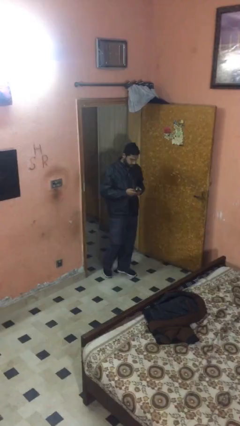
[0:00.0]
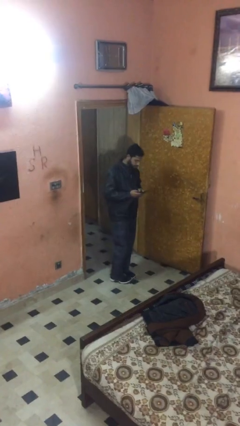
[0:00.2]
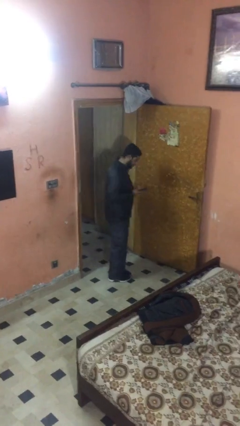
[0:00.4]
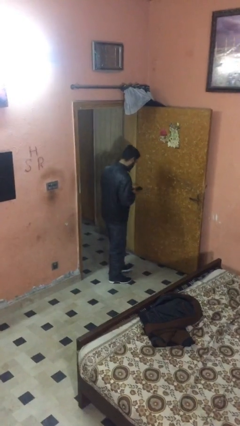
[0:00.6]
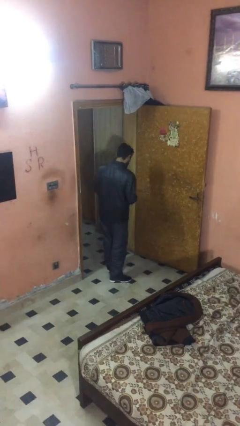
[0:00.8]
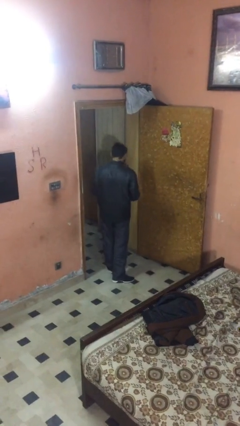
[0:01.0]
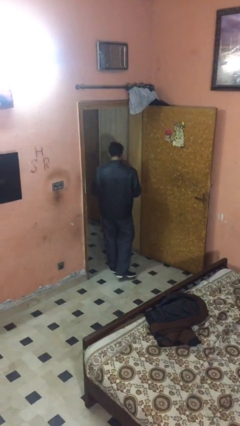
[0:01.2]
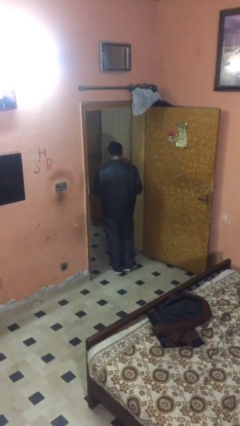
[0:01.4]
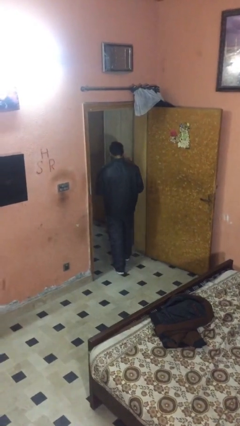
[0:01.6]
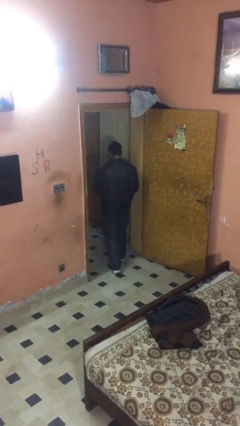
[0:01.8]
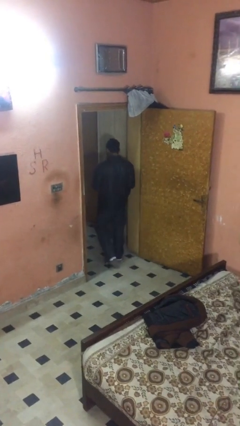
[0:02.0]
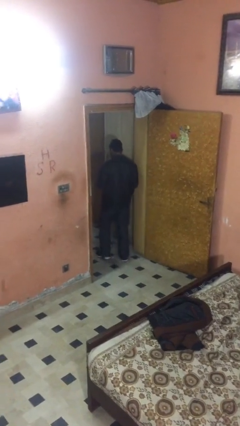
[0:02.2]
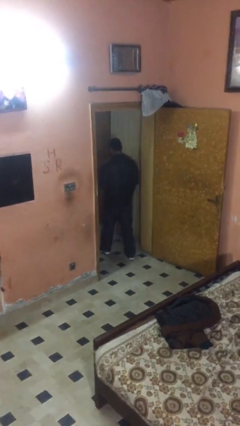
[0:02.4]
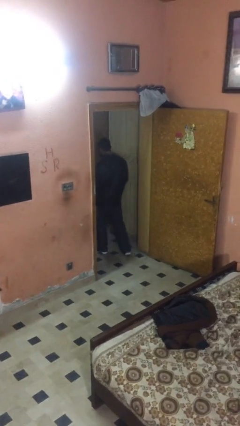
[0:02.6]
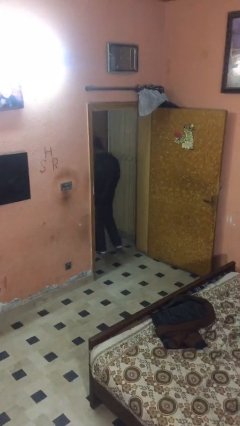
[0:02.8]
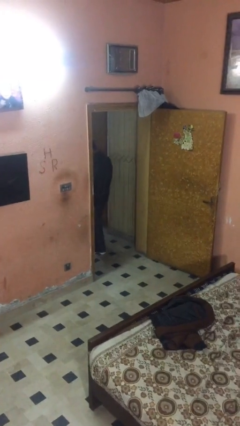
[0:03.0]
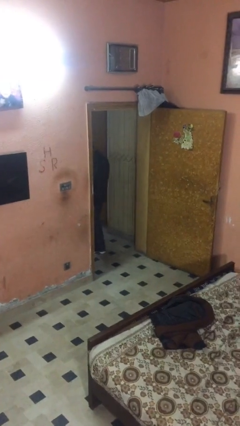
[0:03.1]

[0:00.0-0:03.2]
person exits scene through structure

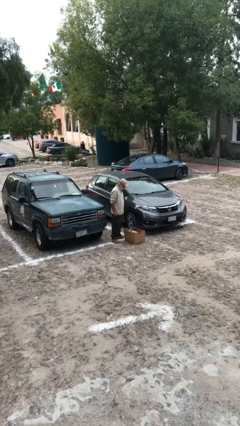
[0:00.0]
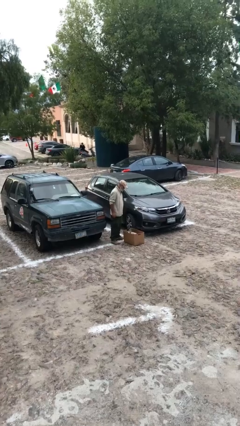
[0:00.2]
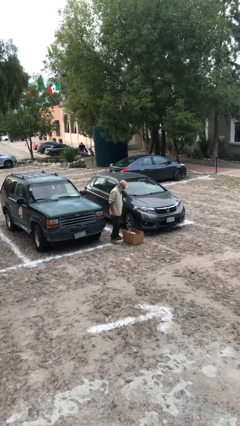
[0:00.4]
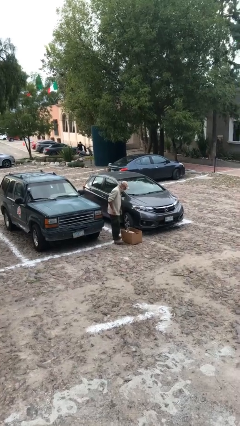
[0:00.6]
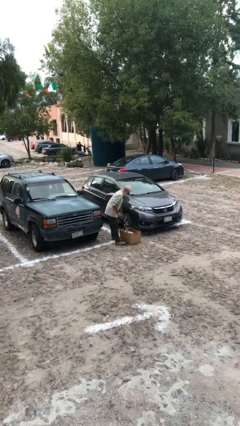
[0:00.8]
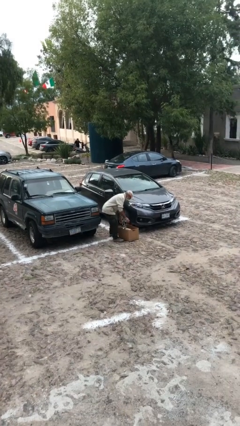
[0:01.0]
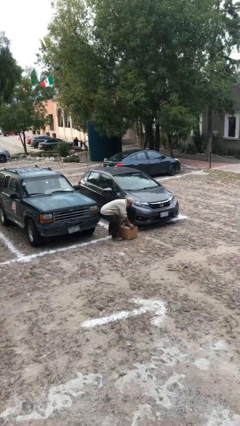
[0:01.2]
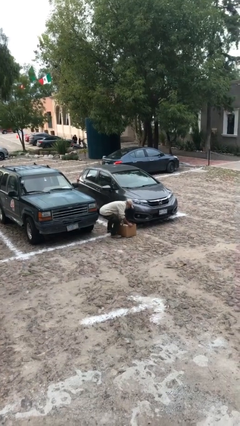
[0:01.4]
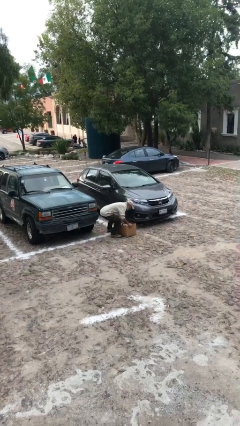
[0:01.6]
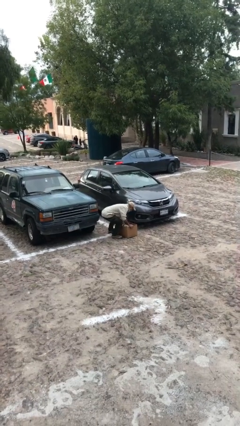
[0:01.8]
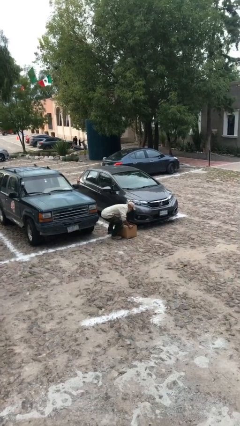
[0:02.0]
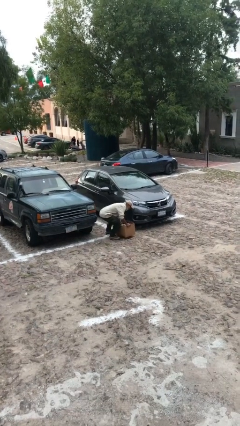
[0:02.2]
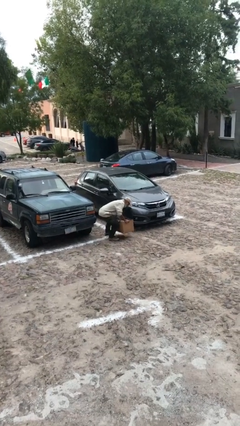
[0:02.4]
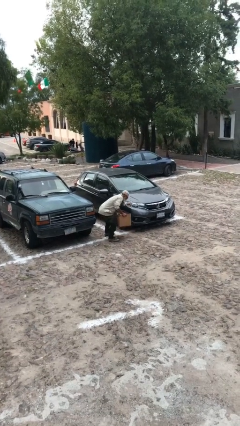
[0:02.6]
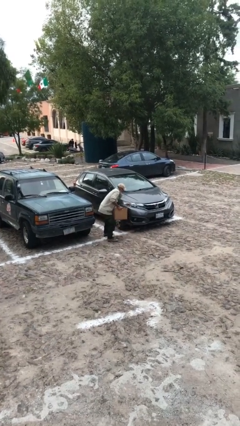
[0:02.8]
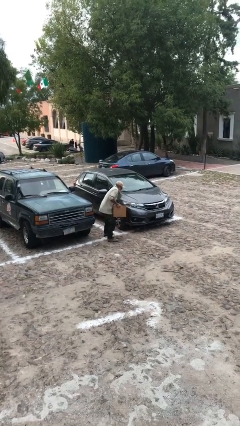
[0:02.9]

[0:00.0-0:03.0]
person picks up object from floor

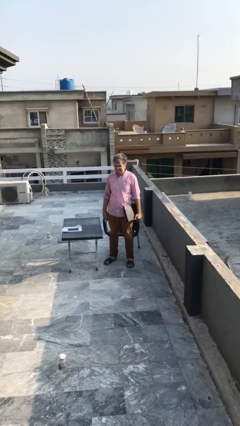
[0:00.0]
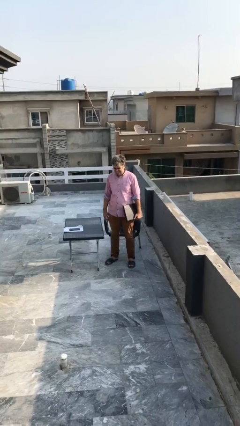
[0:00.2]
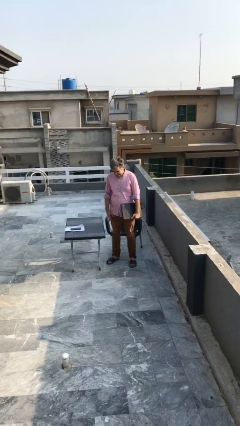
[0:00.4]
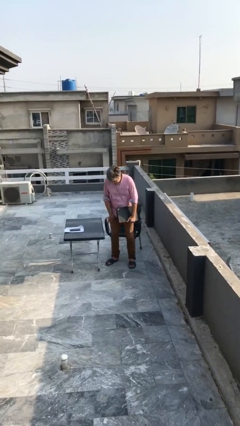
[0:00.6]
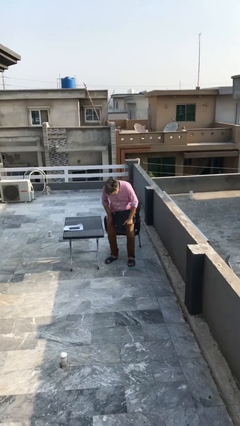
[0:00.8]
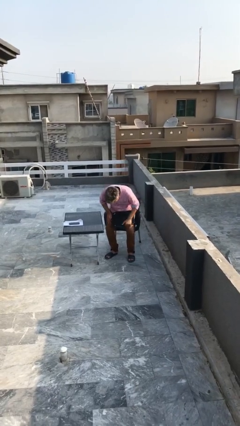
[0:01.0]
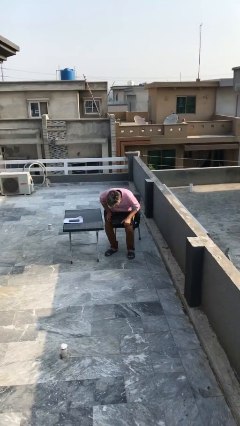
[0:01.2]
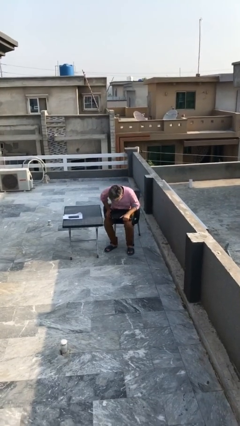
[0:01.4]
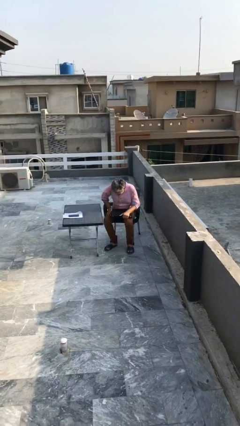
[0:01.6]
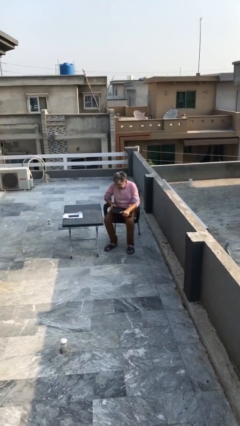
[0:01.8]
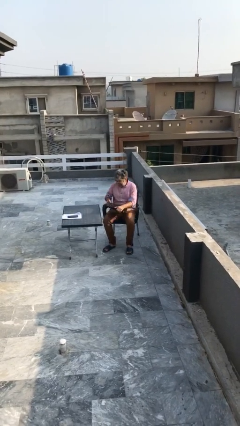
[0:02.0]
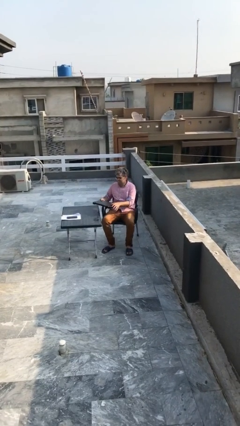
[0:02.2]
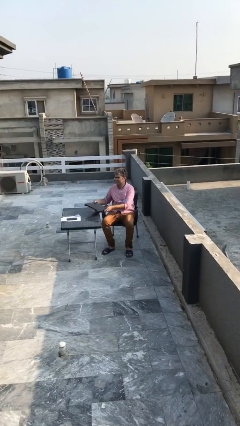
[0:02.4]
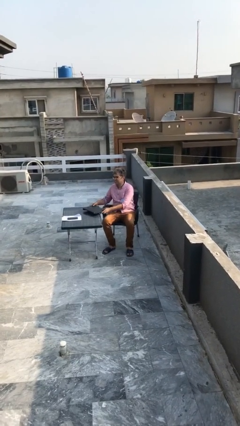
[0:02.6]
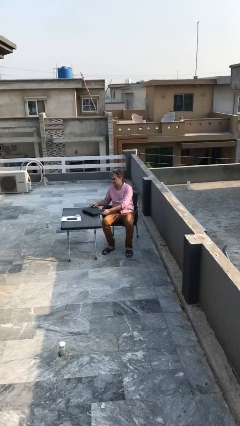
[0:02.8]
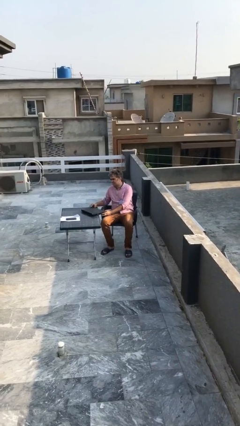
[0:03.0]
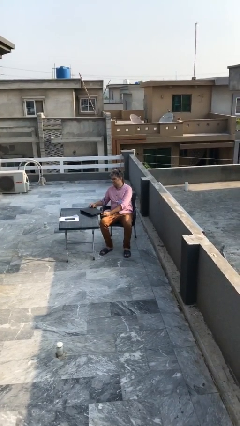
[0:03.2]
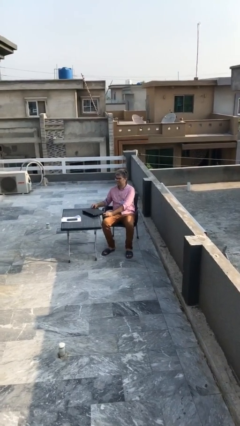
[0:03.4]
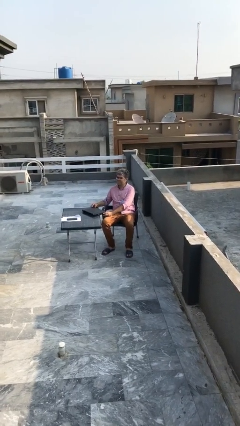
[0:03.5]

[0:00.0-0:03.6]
person sits down

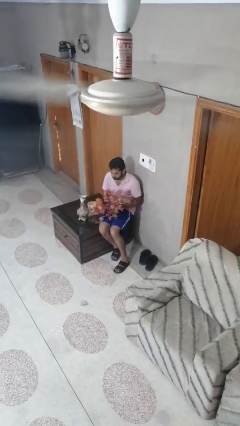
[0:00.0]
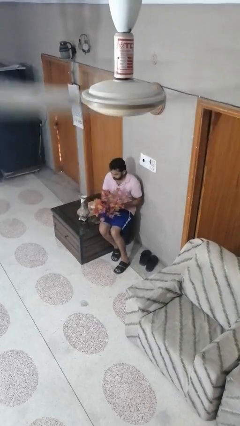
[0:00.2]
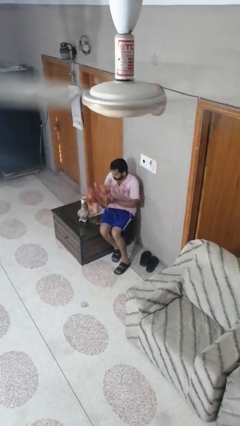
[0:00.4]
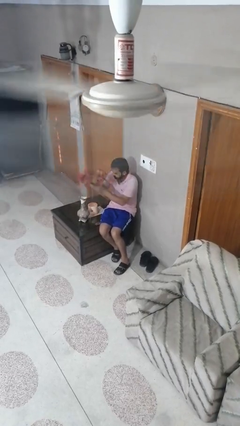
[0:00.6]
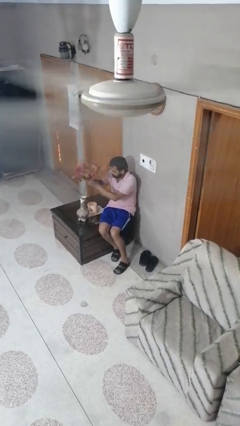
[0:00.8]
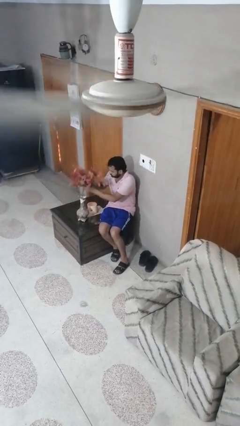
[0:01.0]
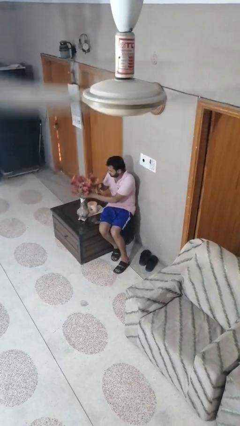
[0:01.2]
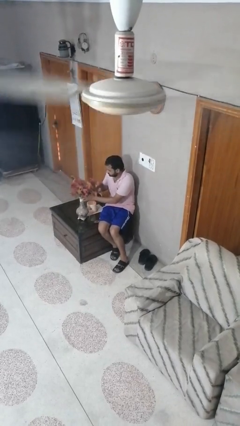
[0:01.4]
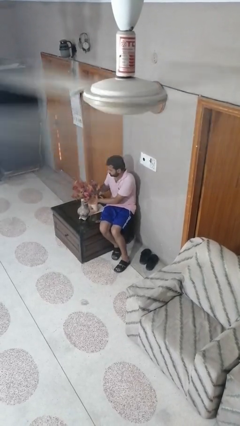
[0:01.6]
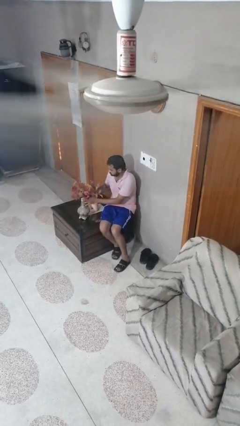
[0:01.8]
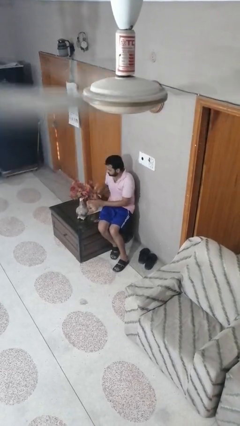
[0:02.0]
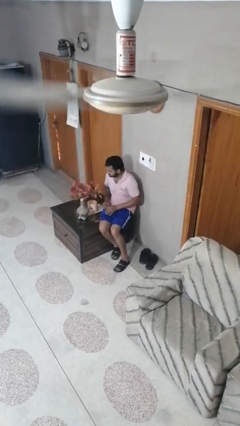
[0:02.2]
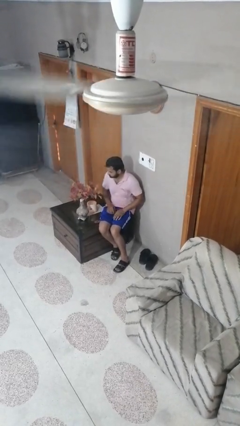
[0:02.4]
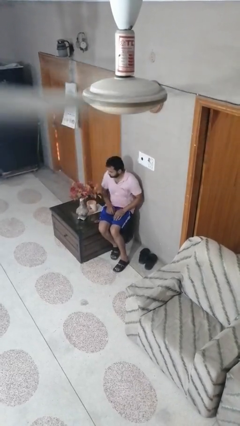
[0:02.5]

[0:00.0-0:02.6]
person arranges flowers in vase

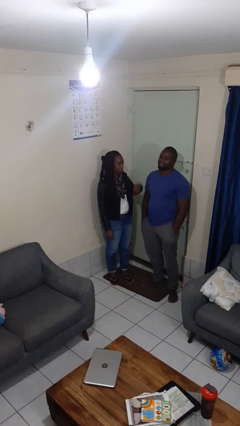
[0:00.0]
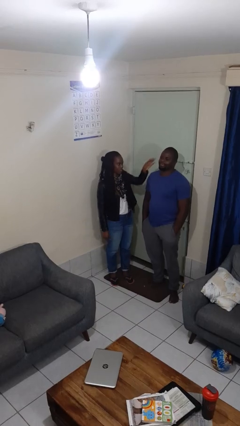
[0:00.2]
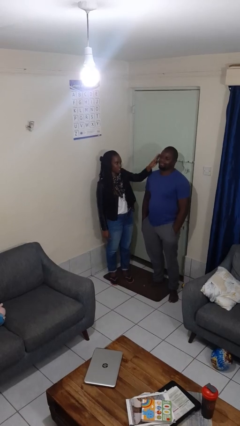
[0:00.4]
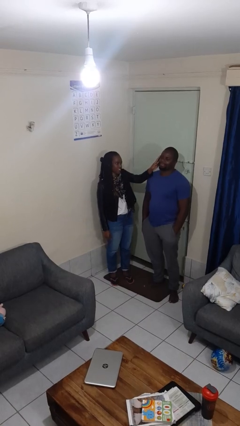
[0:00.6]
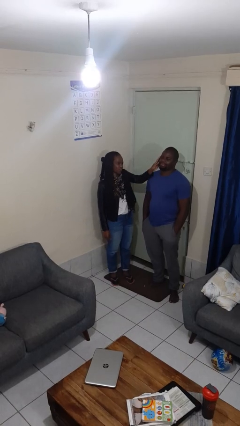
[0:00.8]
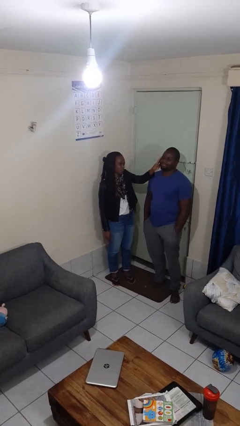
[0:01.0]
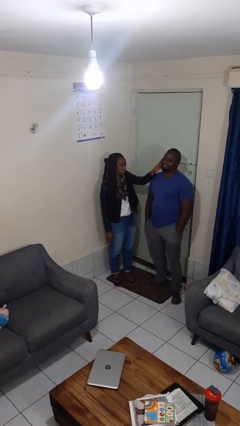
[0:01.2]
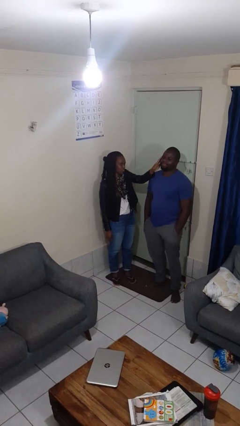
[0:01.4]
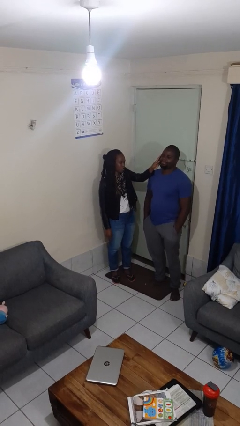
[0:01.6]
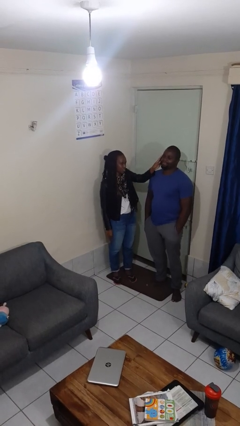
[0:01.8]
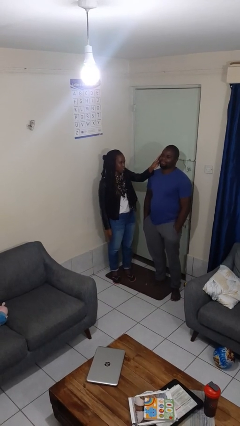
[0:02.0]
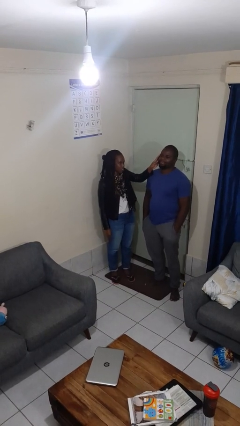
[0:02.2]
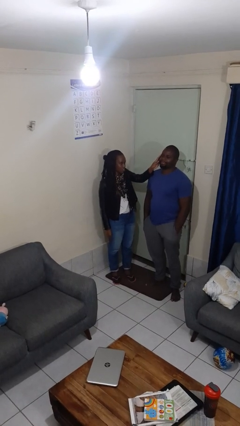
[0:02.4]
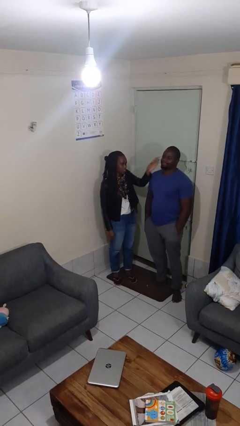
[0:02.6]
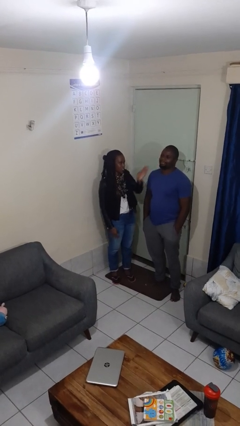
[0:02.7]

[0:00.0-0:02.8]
person touches face of person

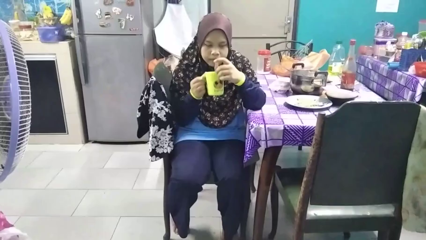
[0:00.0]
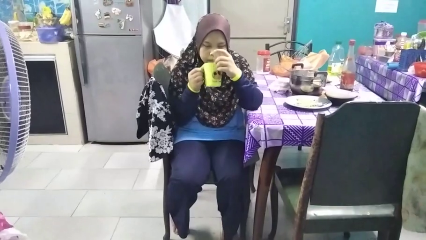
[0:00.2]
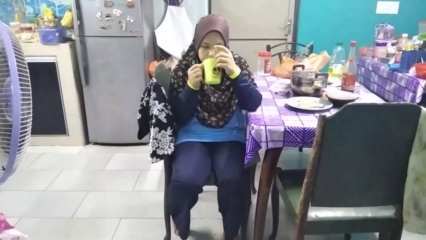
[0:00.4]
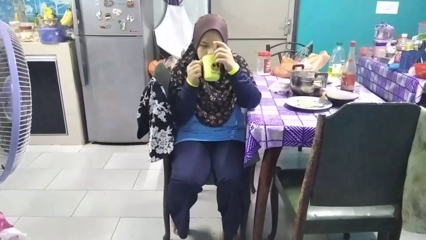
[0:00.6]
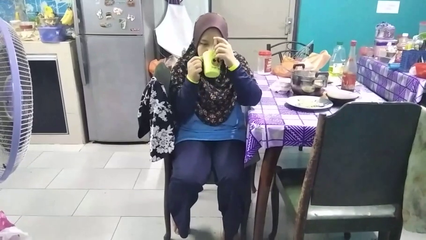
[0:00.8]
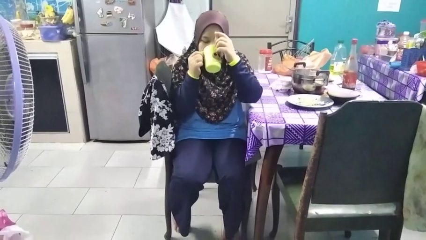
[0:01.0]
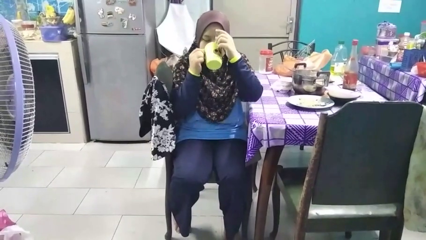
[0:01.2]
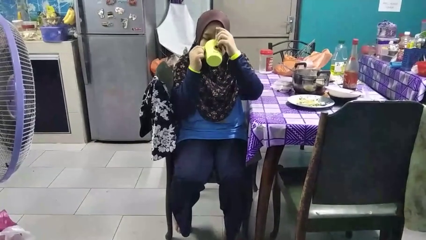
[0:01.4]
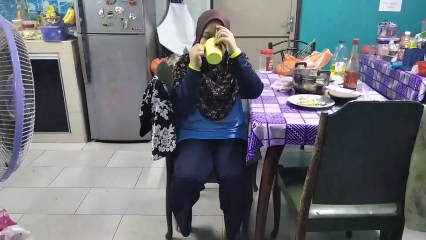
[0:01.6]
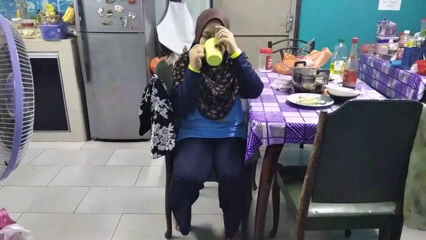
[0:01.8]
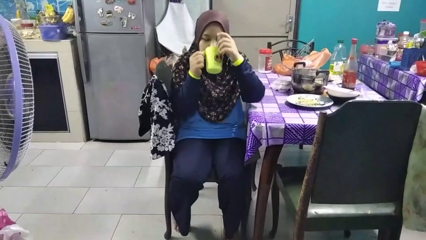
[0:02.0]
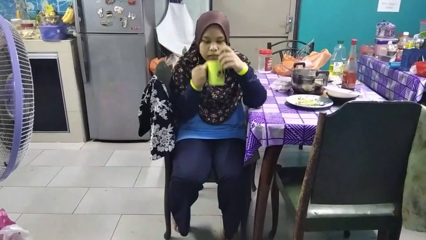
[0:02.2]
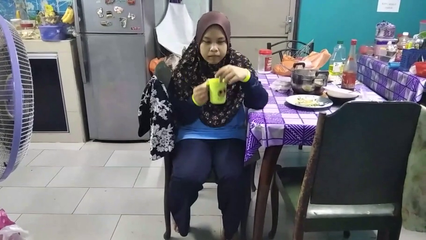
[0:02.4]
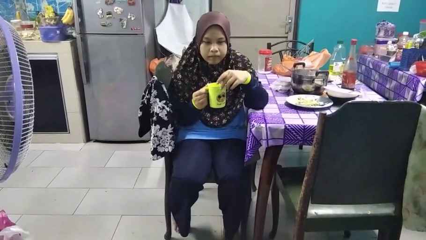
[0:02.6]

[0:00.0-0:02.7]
person drinks from mug
